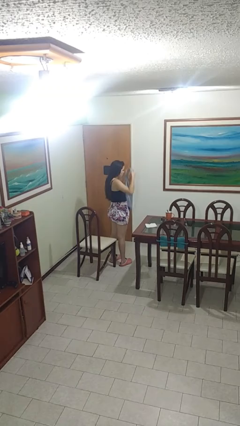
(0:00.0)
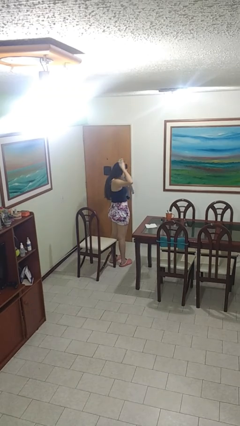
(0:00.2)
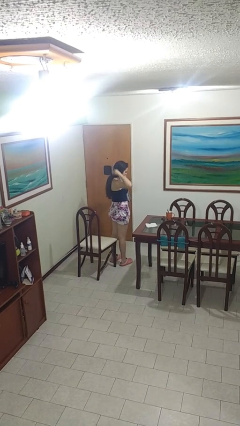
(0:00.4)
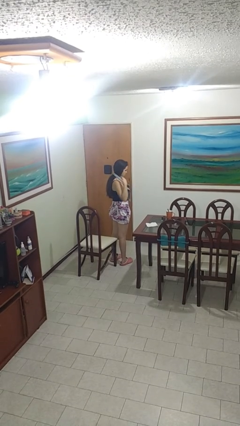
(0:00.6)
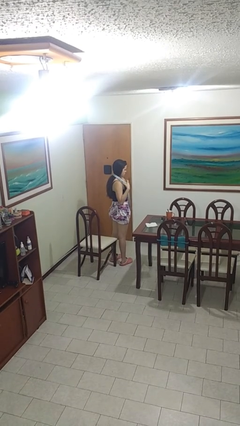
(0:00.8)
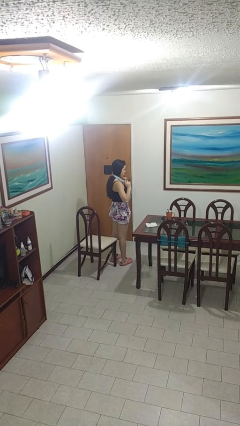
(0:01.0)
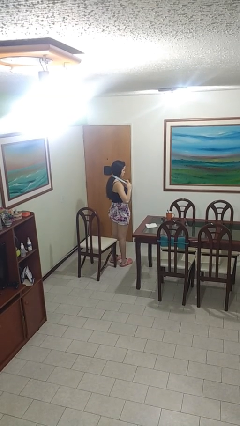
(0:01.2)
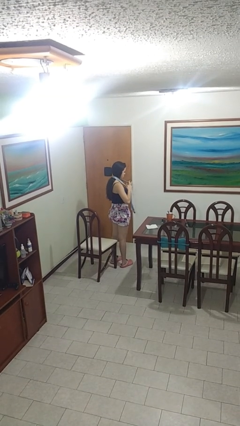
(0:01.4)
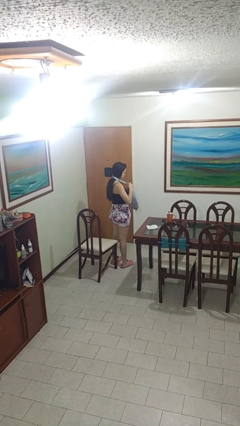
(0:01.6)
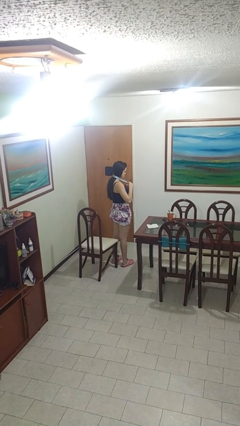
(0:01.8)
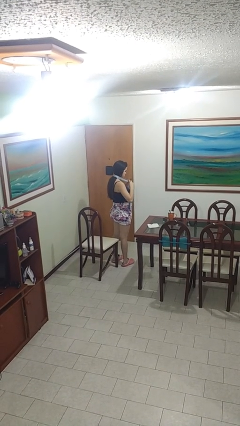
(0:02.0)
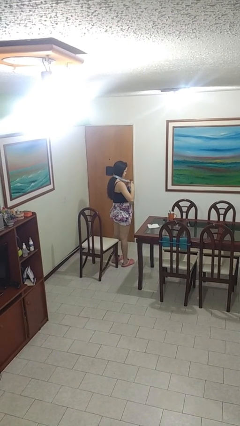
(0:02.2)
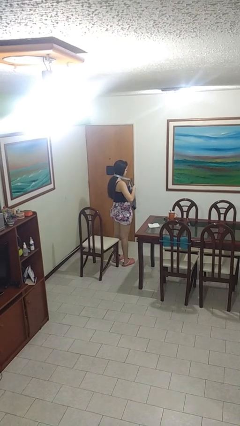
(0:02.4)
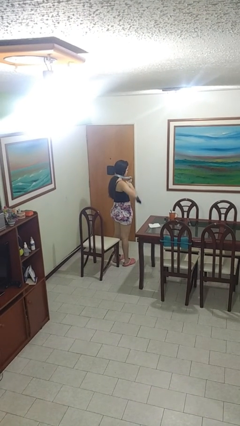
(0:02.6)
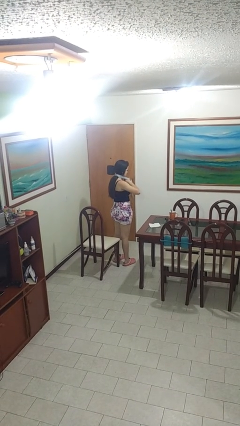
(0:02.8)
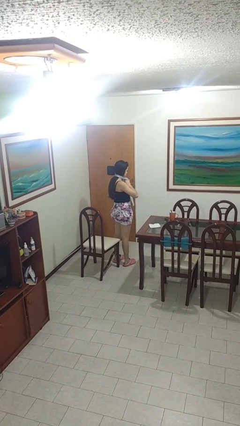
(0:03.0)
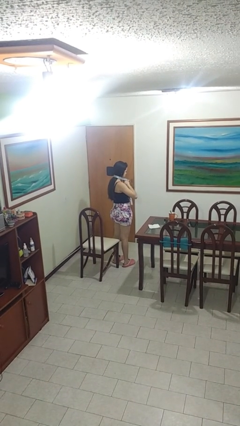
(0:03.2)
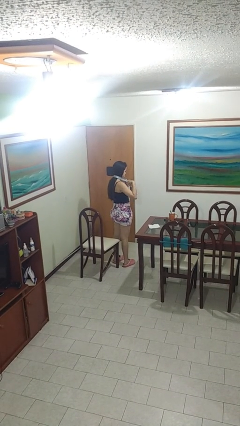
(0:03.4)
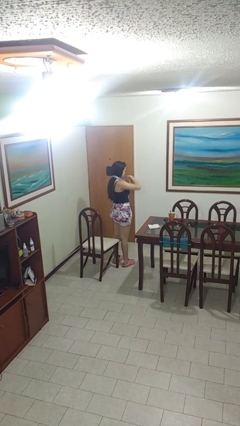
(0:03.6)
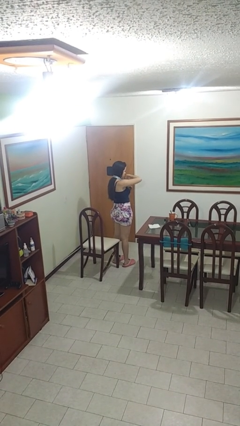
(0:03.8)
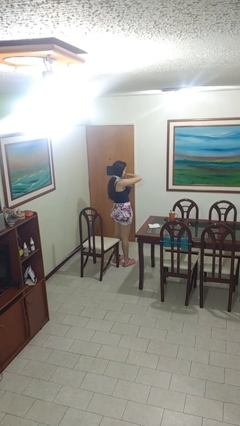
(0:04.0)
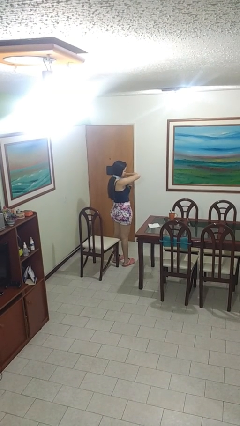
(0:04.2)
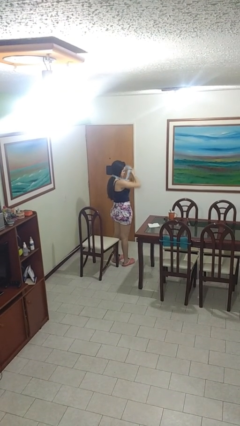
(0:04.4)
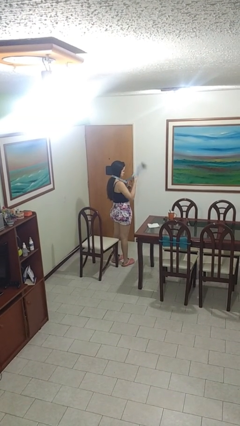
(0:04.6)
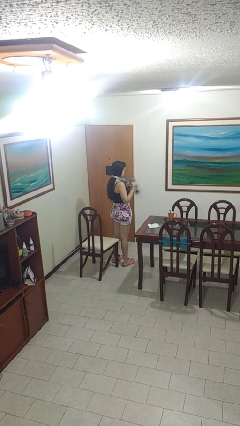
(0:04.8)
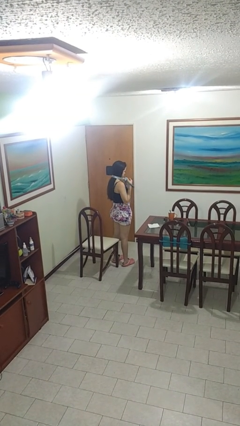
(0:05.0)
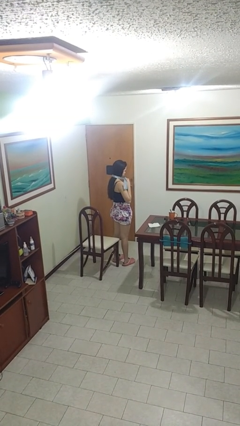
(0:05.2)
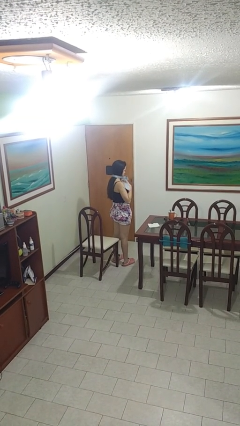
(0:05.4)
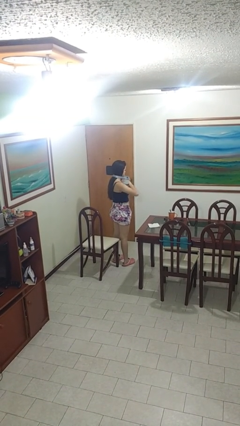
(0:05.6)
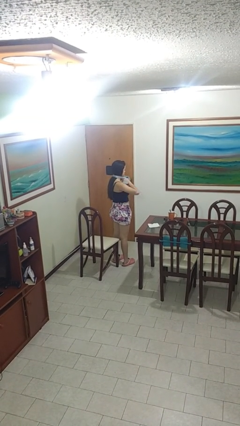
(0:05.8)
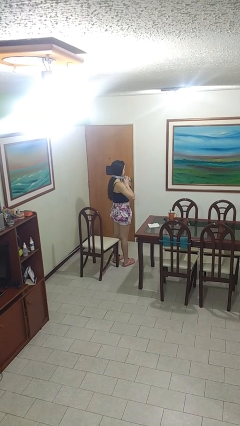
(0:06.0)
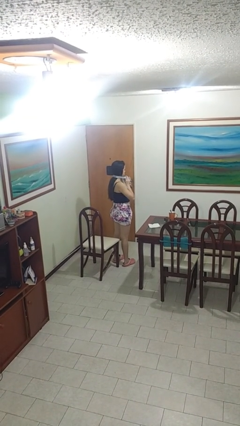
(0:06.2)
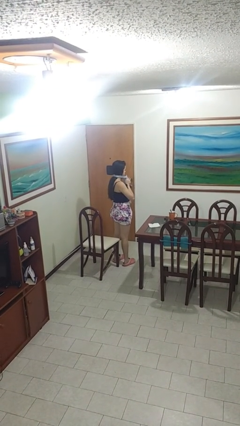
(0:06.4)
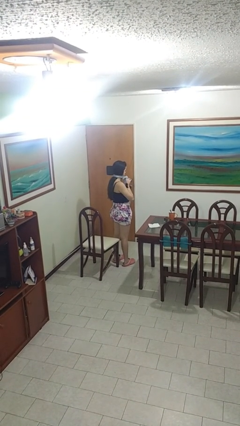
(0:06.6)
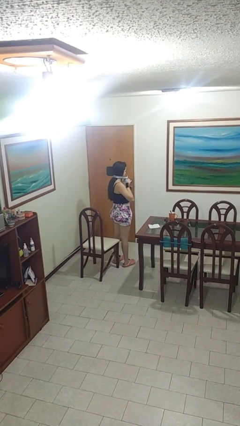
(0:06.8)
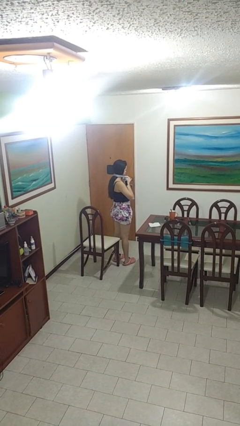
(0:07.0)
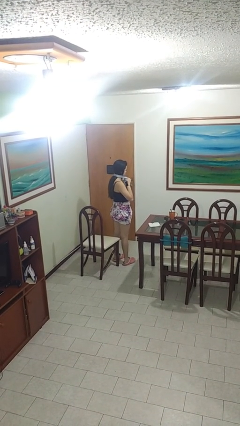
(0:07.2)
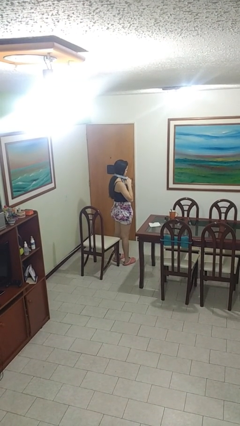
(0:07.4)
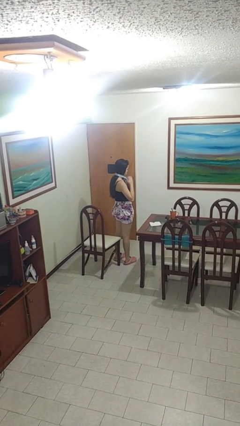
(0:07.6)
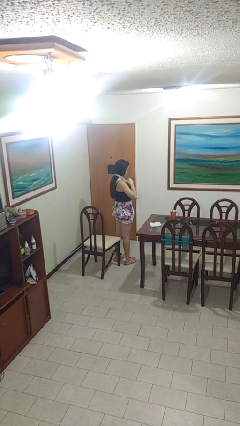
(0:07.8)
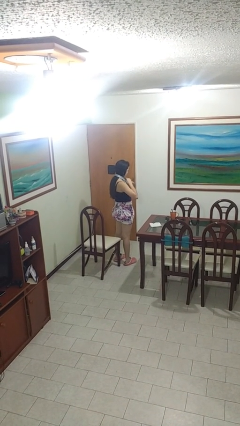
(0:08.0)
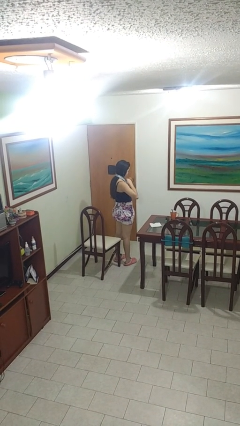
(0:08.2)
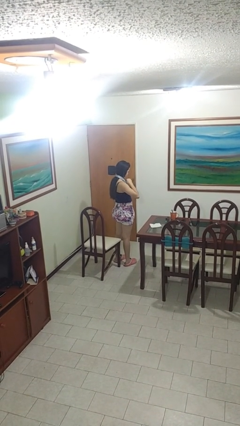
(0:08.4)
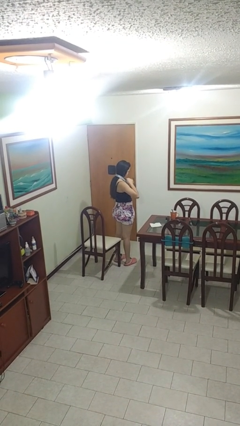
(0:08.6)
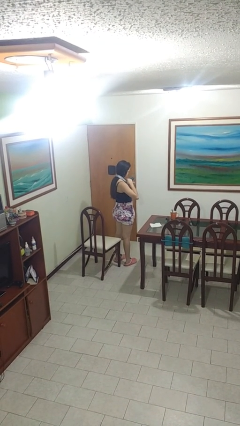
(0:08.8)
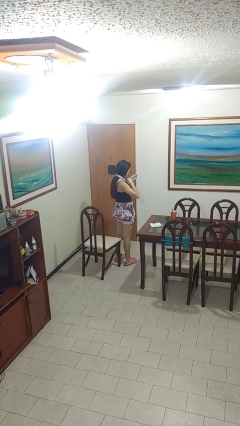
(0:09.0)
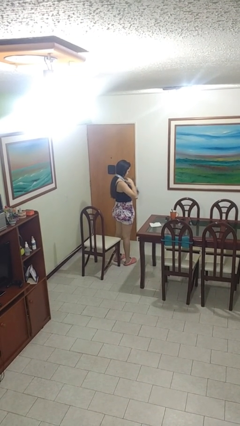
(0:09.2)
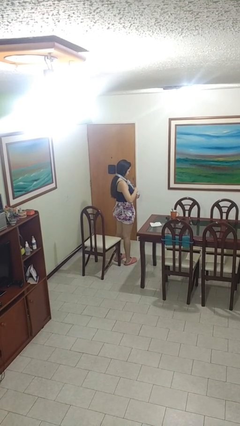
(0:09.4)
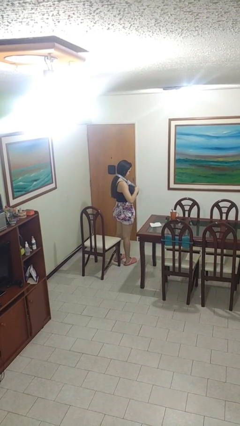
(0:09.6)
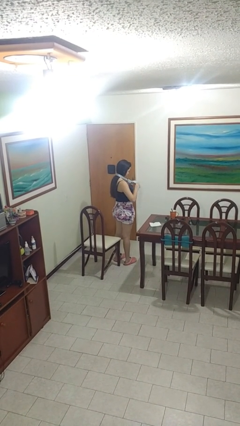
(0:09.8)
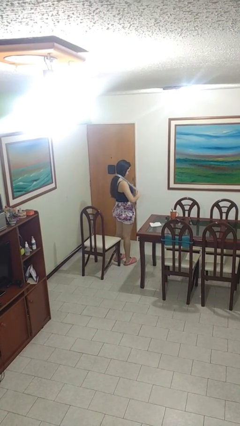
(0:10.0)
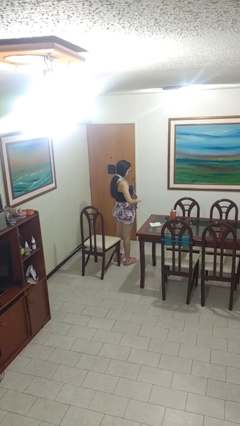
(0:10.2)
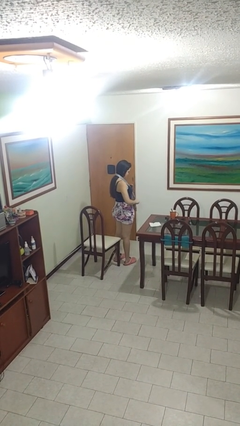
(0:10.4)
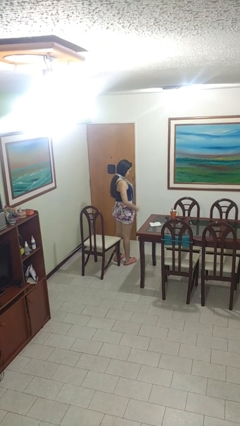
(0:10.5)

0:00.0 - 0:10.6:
person puts on necktie

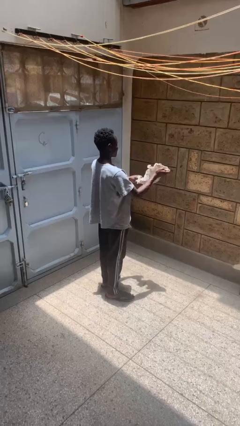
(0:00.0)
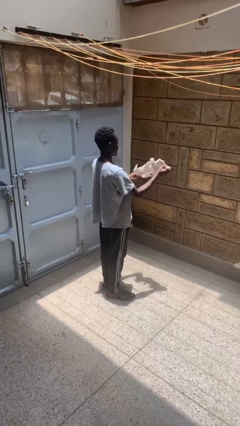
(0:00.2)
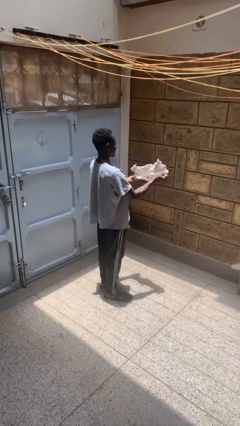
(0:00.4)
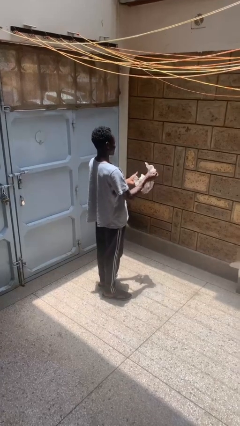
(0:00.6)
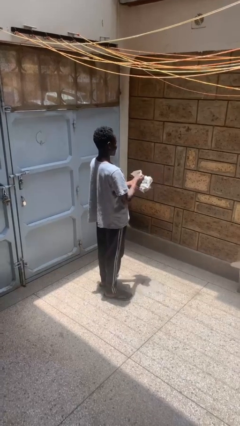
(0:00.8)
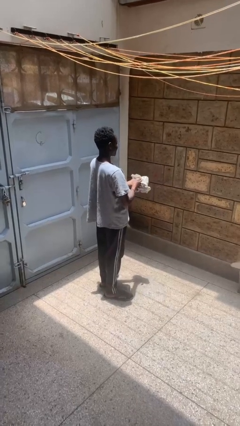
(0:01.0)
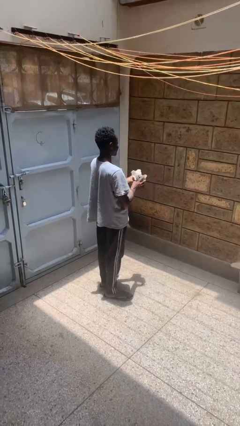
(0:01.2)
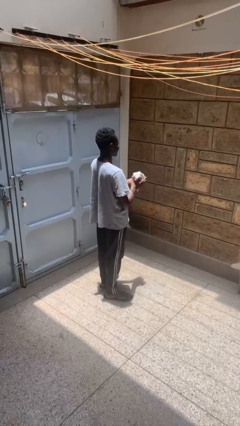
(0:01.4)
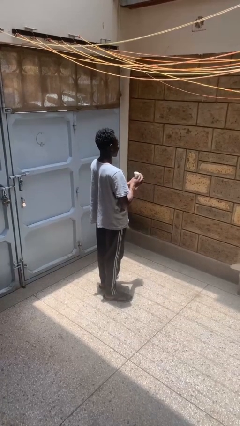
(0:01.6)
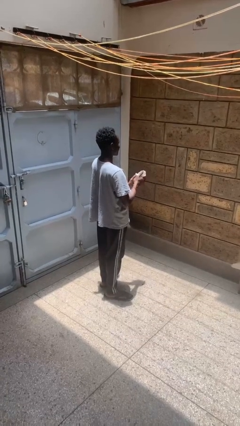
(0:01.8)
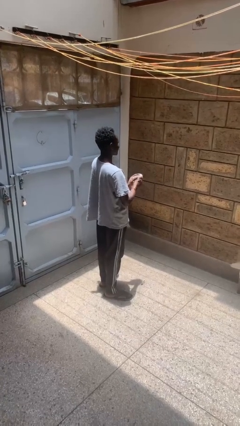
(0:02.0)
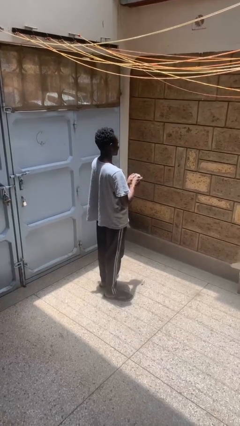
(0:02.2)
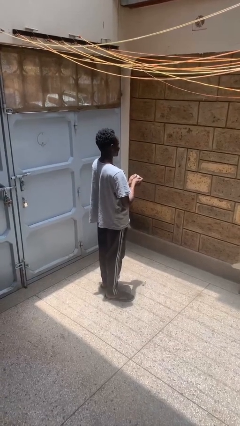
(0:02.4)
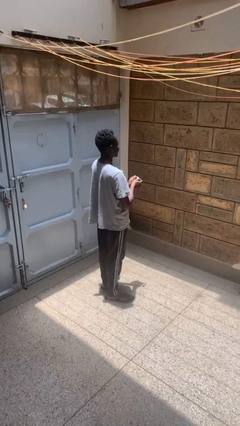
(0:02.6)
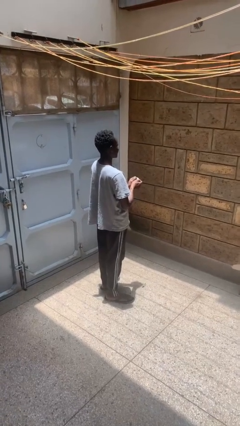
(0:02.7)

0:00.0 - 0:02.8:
person crumples paper

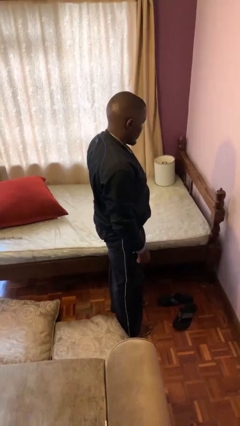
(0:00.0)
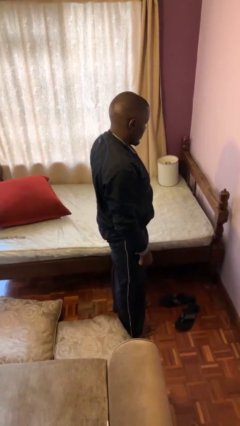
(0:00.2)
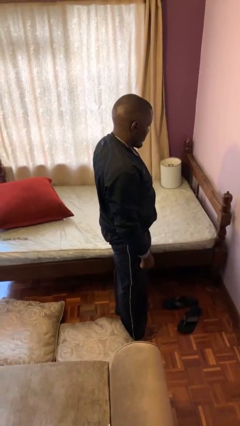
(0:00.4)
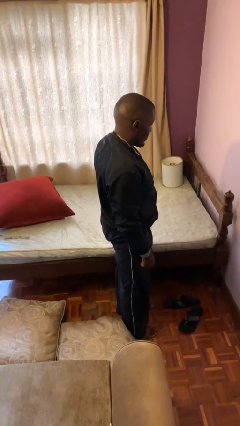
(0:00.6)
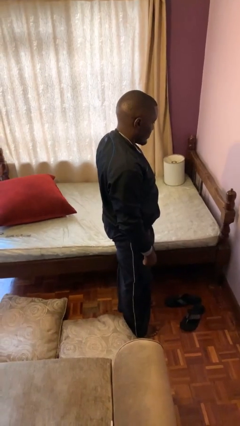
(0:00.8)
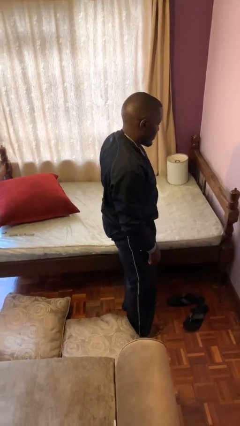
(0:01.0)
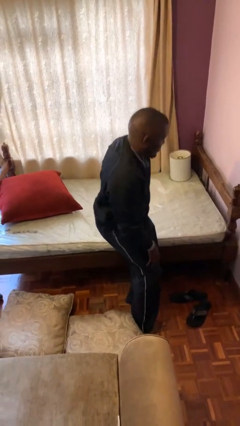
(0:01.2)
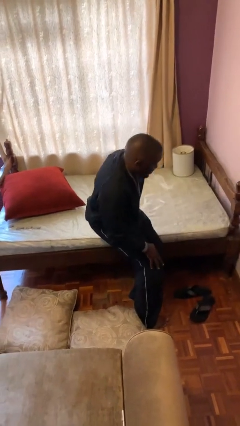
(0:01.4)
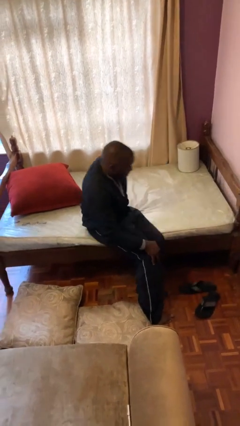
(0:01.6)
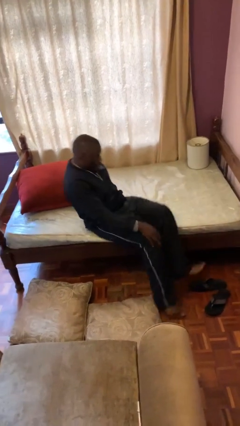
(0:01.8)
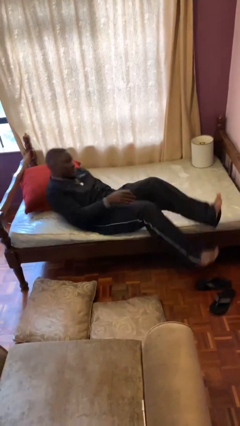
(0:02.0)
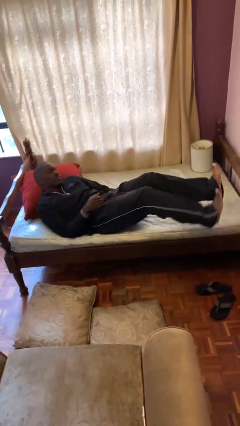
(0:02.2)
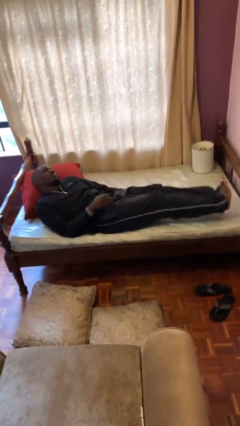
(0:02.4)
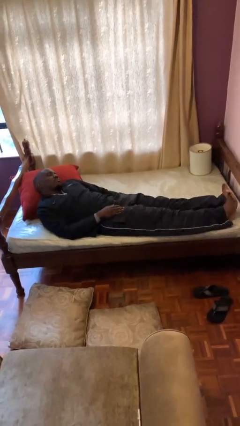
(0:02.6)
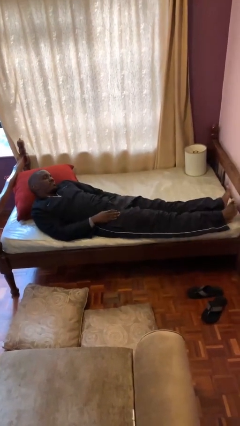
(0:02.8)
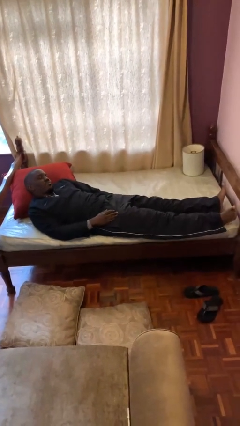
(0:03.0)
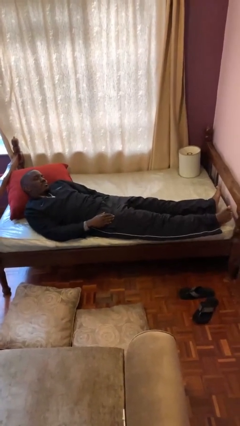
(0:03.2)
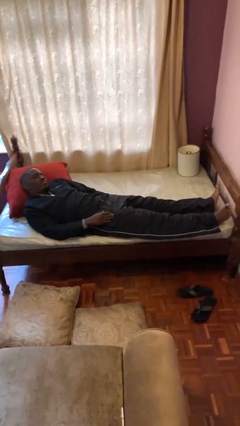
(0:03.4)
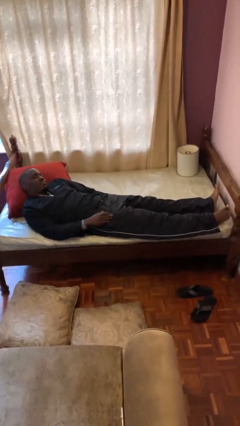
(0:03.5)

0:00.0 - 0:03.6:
person lies down on bed

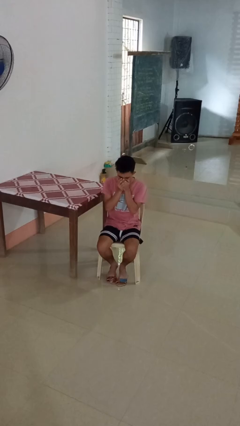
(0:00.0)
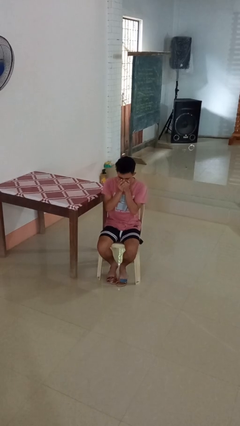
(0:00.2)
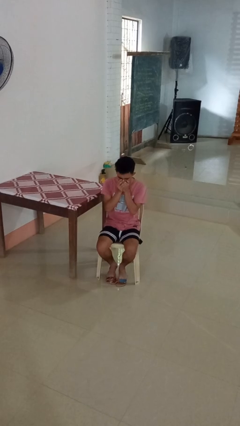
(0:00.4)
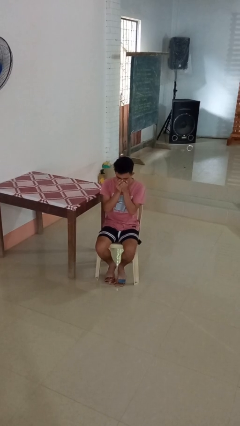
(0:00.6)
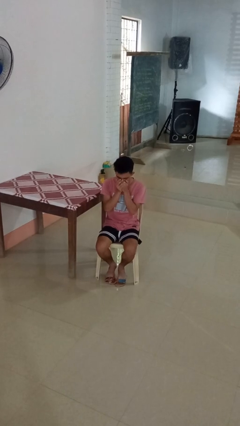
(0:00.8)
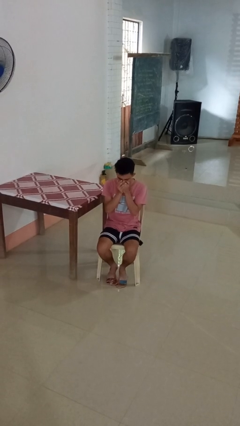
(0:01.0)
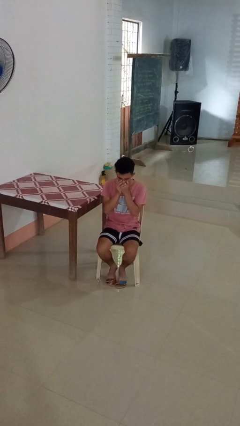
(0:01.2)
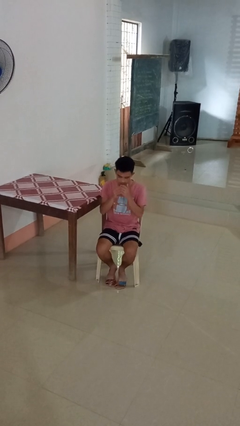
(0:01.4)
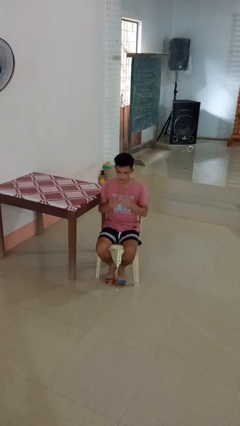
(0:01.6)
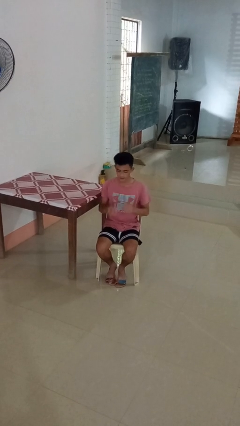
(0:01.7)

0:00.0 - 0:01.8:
person sneezes into hand
